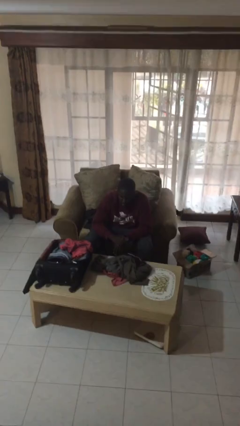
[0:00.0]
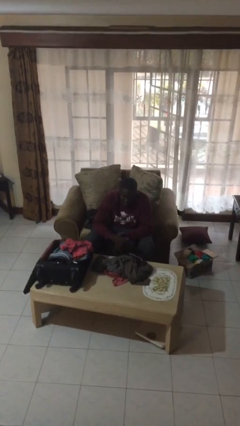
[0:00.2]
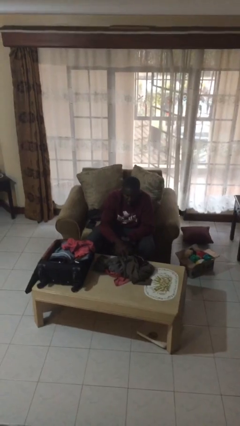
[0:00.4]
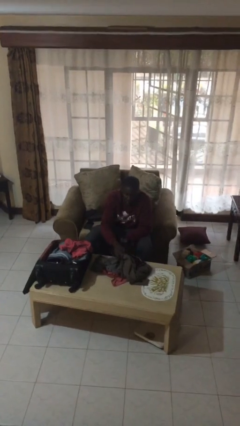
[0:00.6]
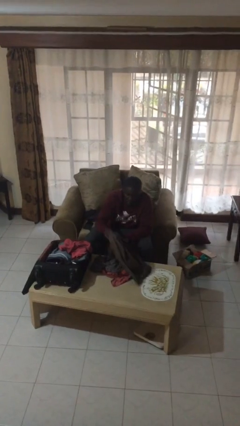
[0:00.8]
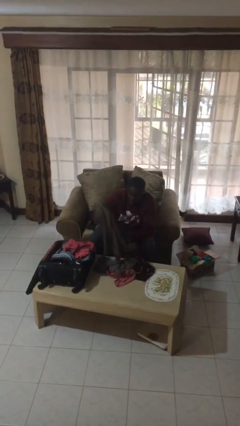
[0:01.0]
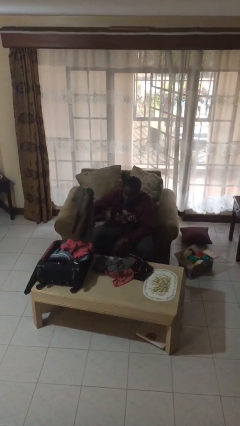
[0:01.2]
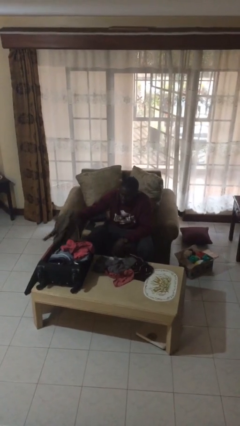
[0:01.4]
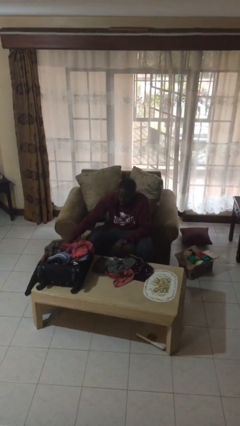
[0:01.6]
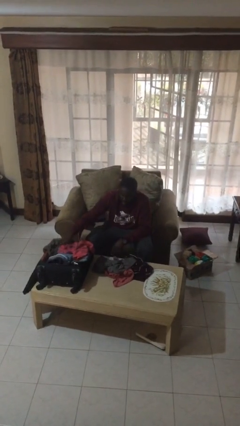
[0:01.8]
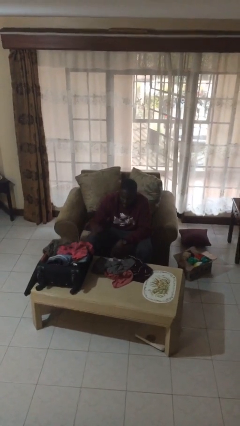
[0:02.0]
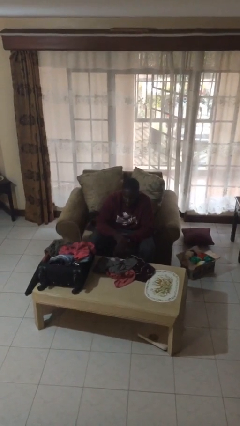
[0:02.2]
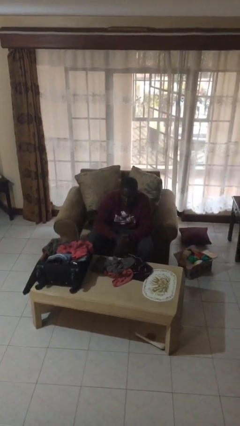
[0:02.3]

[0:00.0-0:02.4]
person loads clothes into suitcase

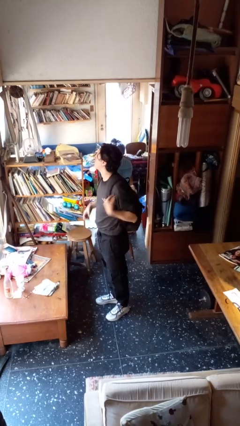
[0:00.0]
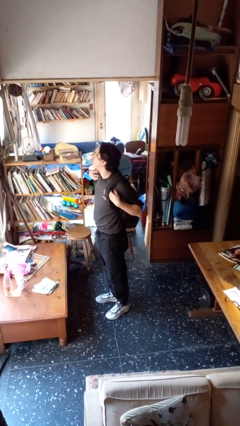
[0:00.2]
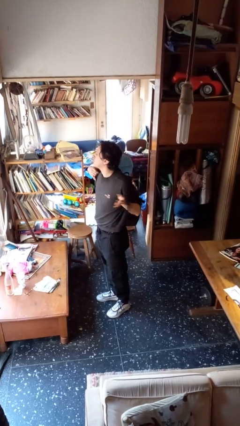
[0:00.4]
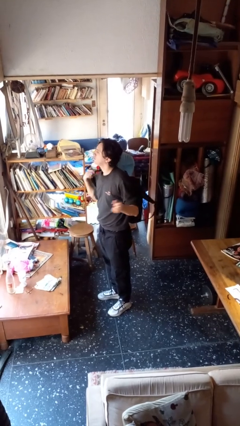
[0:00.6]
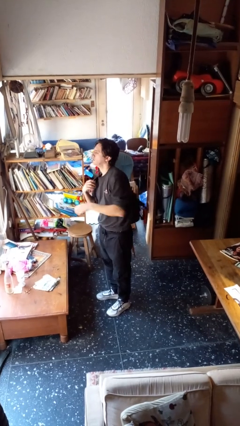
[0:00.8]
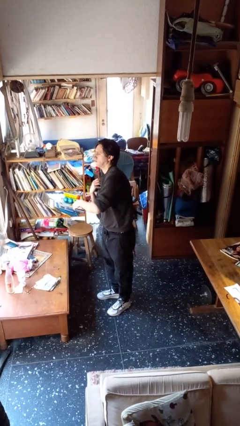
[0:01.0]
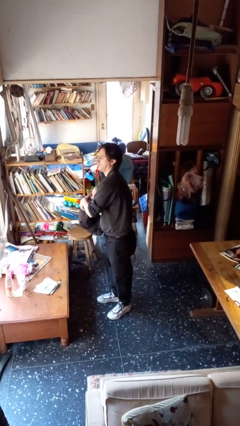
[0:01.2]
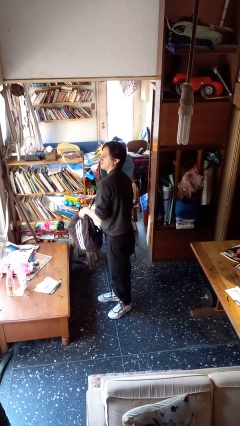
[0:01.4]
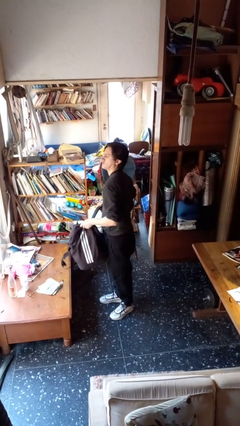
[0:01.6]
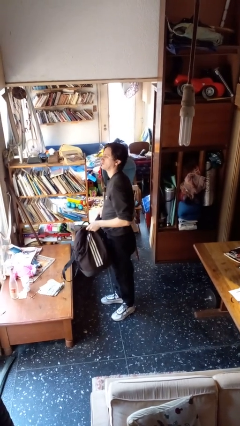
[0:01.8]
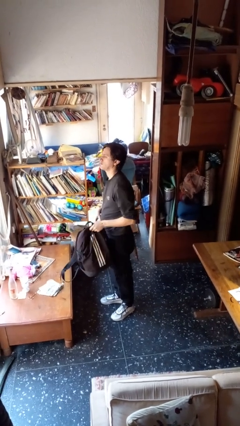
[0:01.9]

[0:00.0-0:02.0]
person takes off backpack

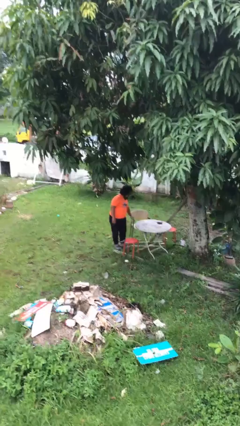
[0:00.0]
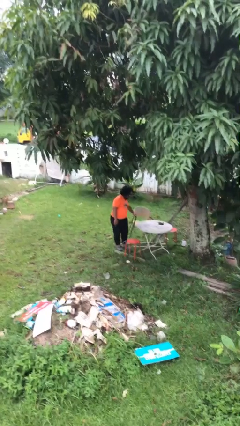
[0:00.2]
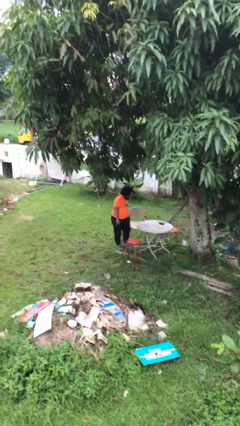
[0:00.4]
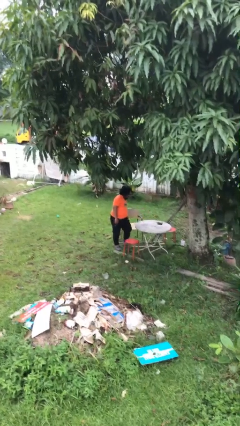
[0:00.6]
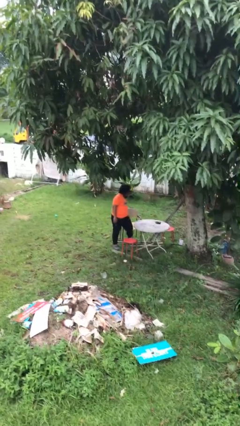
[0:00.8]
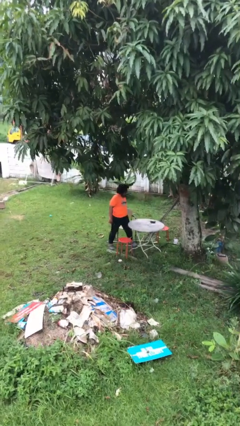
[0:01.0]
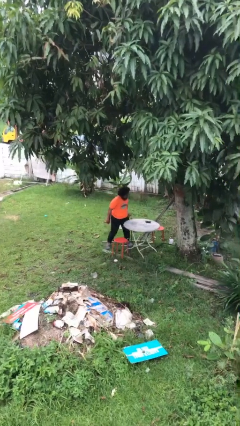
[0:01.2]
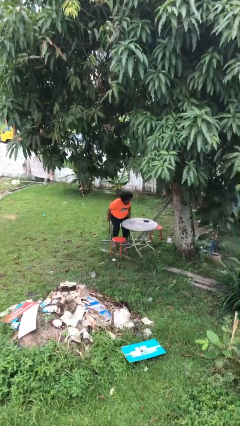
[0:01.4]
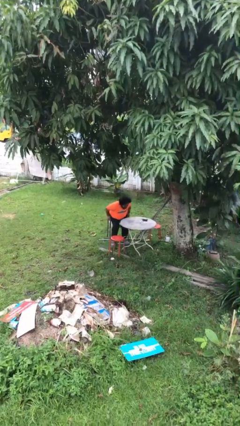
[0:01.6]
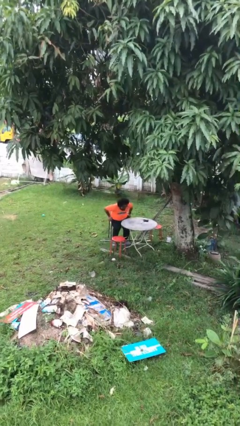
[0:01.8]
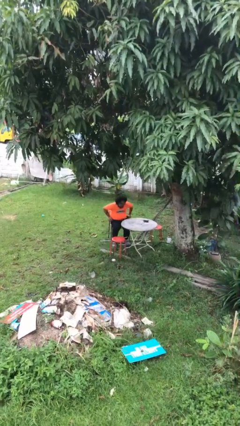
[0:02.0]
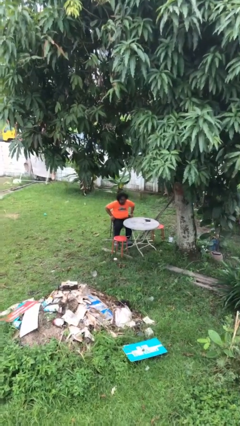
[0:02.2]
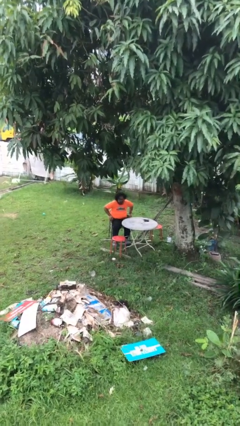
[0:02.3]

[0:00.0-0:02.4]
person sits down

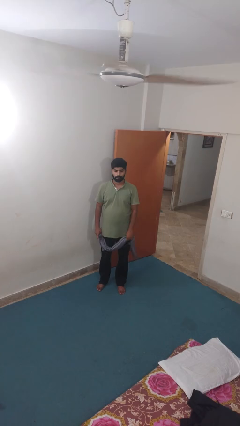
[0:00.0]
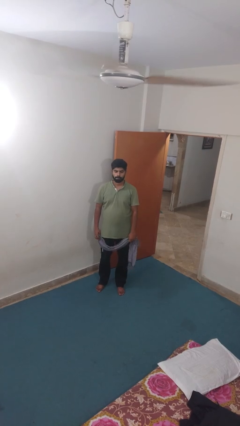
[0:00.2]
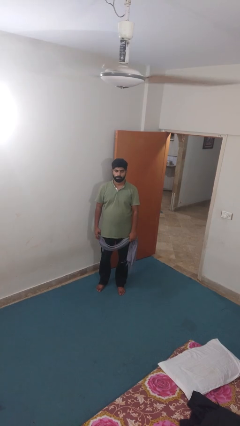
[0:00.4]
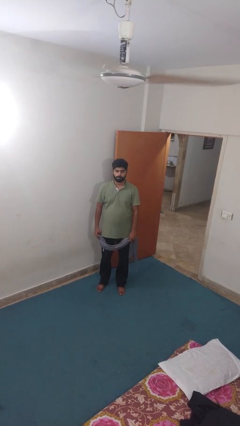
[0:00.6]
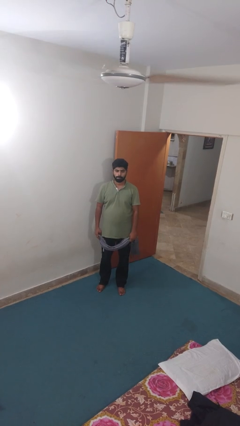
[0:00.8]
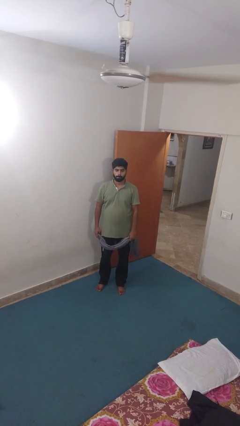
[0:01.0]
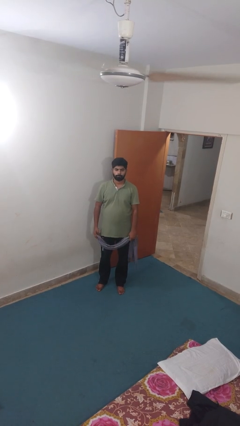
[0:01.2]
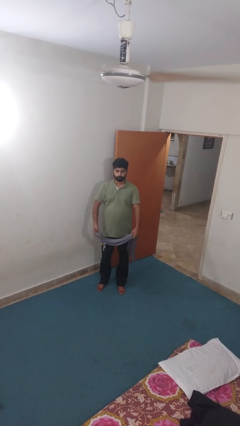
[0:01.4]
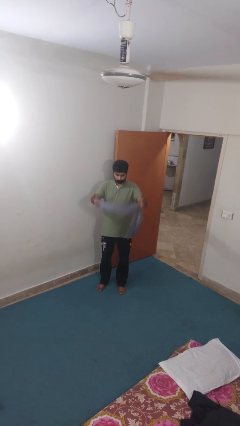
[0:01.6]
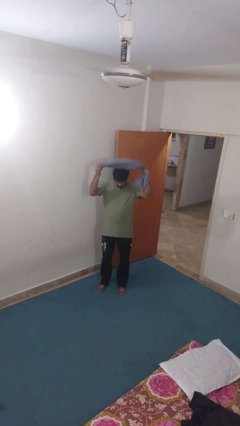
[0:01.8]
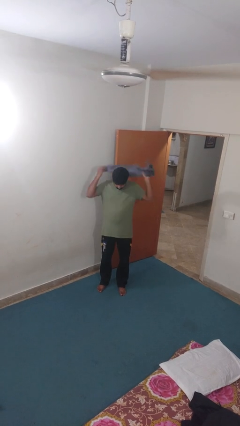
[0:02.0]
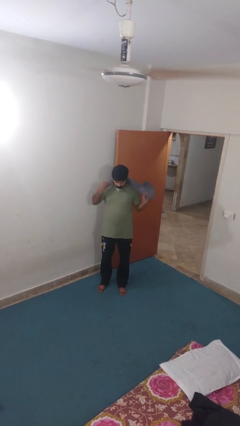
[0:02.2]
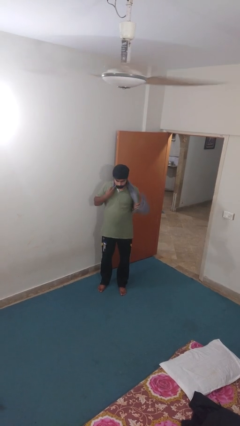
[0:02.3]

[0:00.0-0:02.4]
person puts on scarf

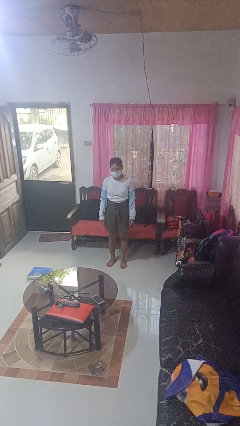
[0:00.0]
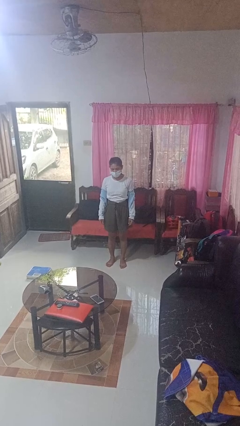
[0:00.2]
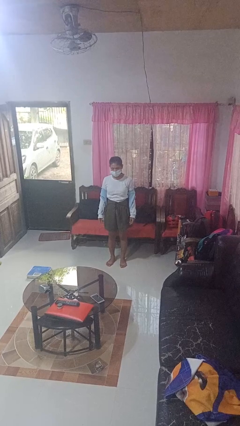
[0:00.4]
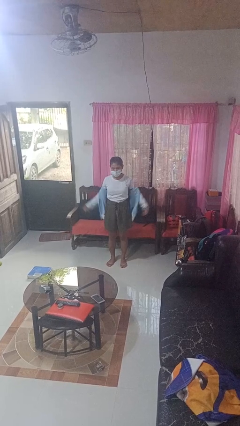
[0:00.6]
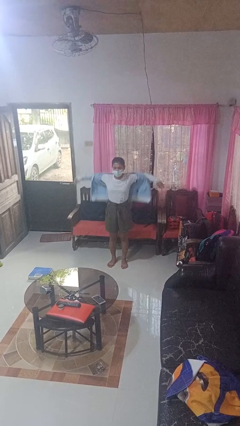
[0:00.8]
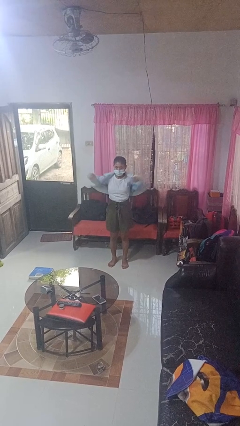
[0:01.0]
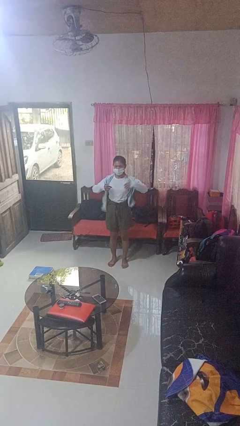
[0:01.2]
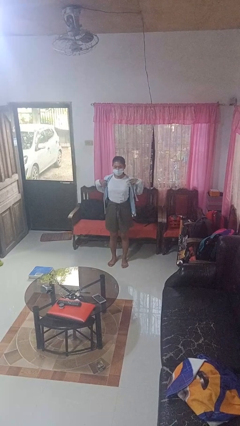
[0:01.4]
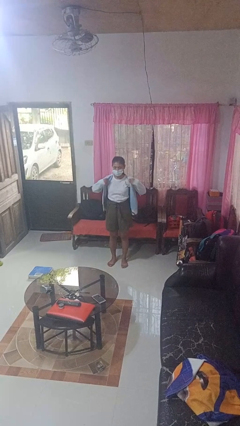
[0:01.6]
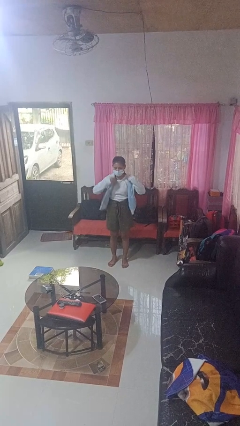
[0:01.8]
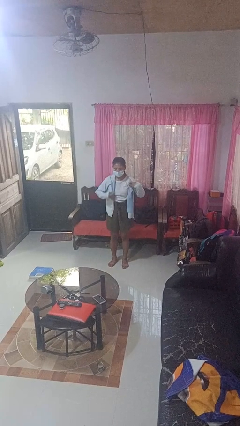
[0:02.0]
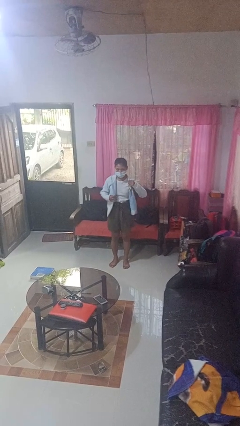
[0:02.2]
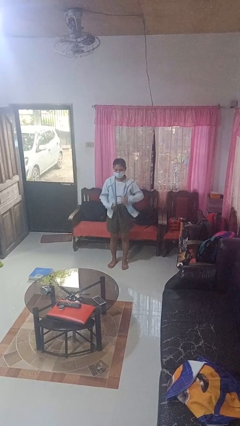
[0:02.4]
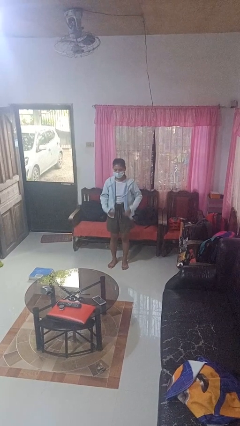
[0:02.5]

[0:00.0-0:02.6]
person puts on jacket

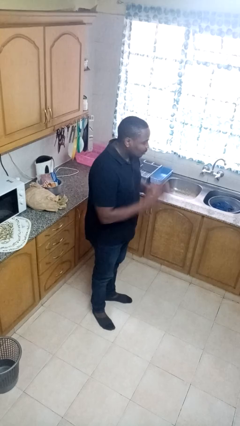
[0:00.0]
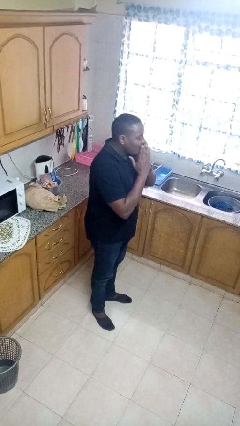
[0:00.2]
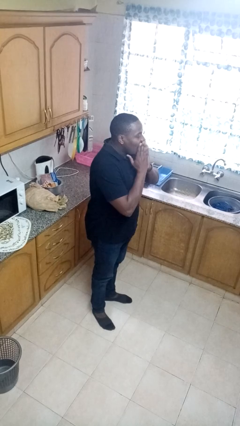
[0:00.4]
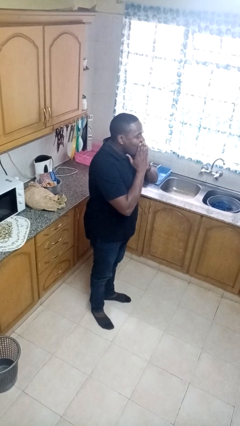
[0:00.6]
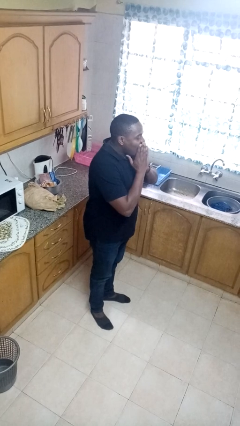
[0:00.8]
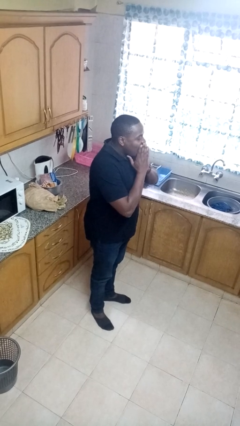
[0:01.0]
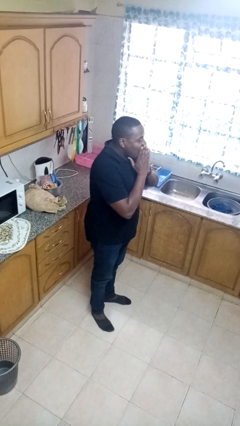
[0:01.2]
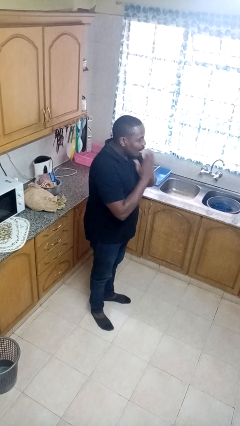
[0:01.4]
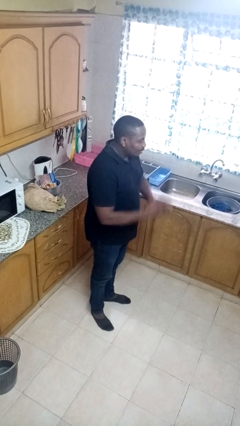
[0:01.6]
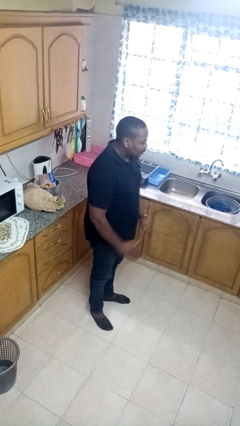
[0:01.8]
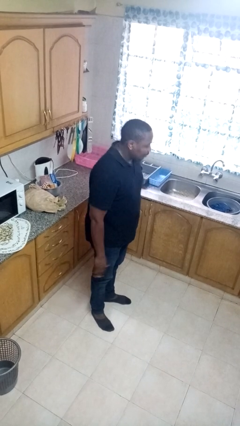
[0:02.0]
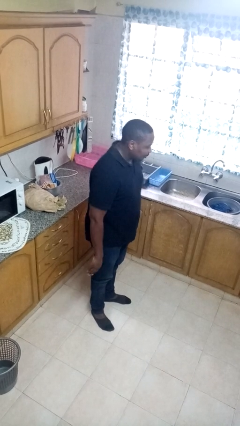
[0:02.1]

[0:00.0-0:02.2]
person yawns

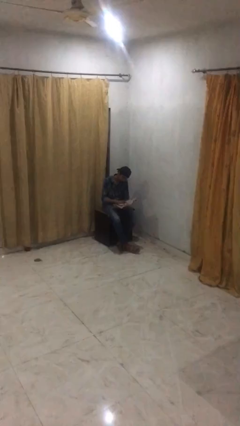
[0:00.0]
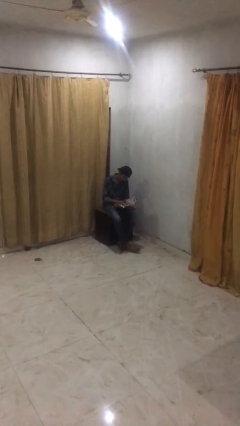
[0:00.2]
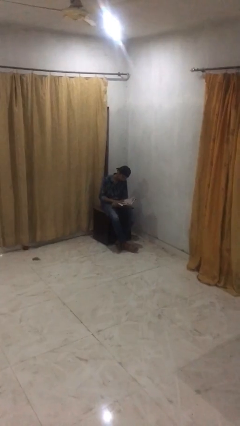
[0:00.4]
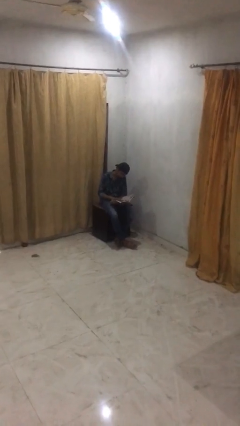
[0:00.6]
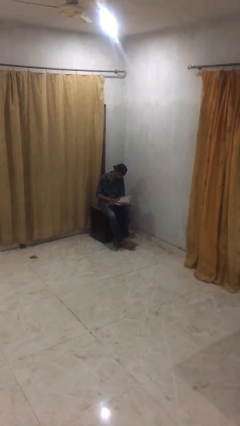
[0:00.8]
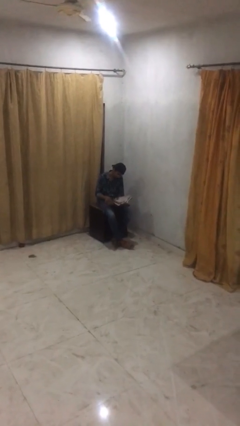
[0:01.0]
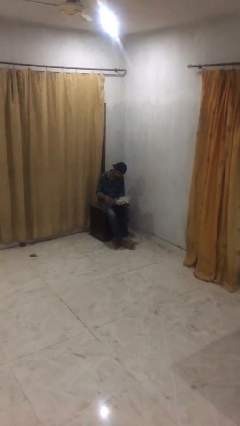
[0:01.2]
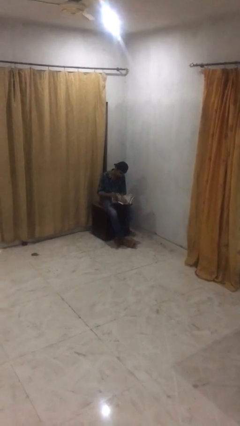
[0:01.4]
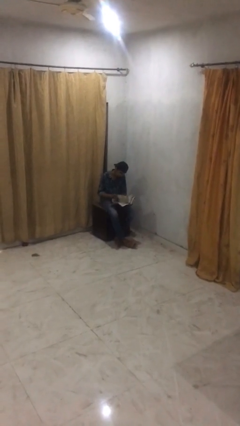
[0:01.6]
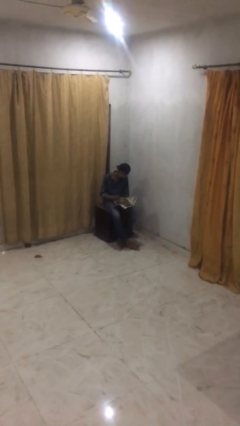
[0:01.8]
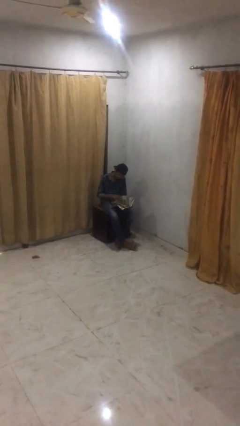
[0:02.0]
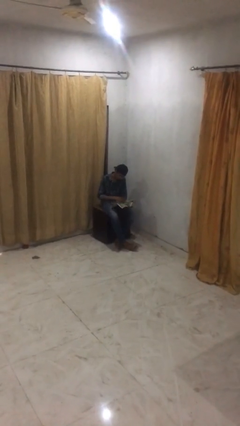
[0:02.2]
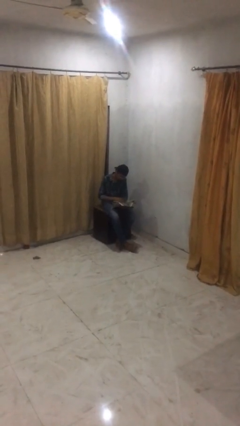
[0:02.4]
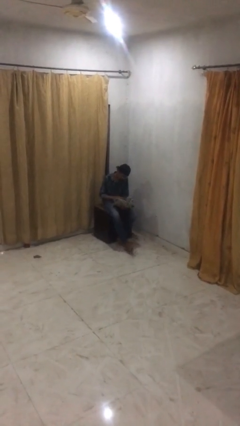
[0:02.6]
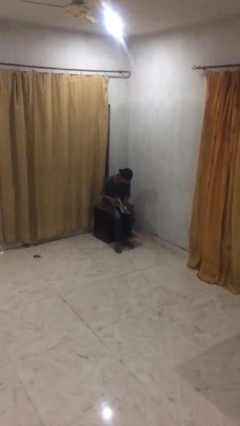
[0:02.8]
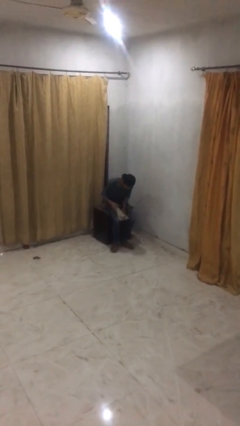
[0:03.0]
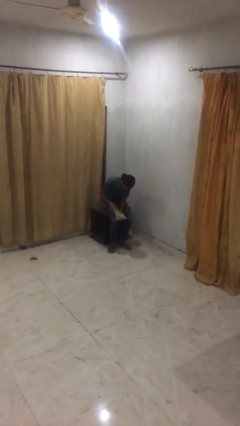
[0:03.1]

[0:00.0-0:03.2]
person reads document
